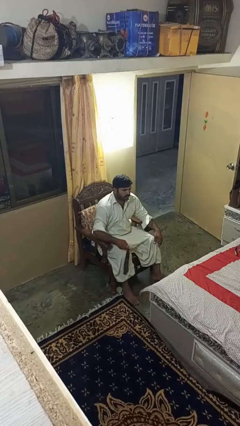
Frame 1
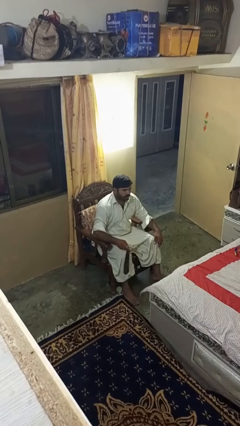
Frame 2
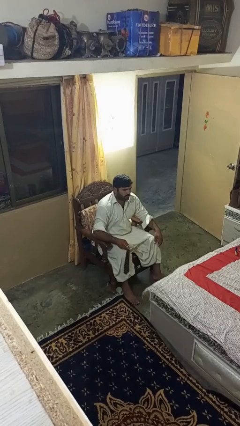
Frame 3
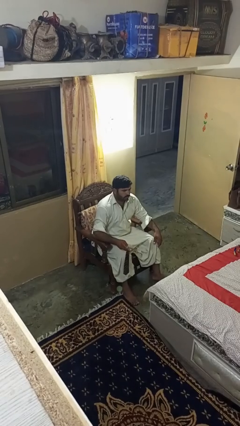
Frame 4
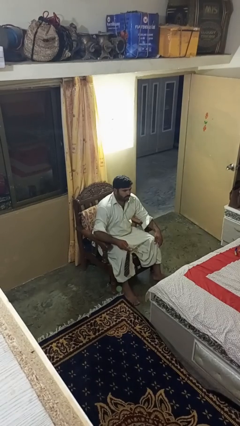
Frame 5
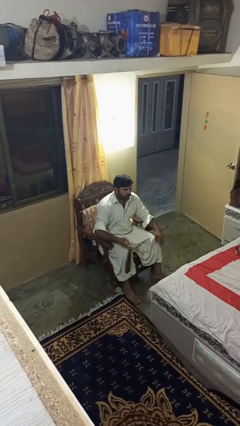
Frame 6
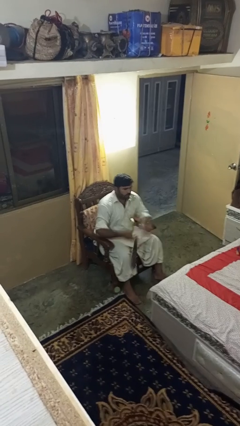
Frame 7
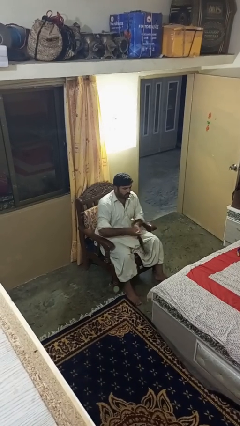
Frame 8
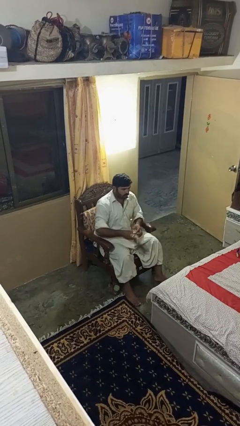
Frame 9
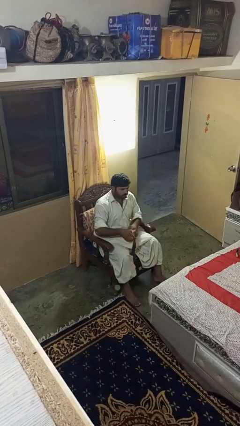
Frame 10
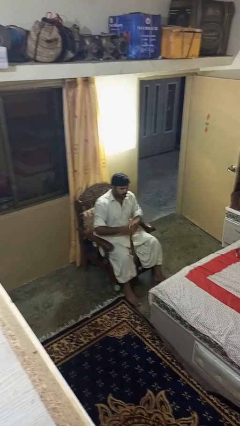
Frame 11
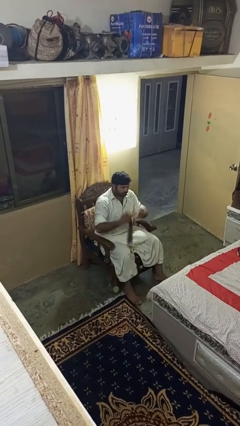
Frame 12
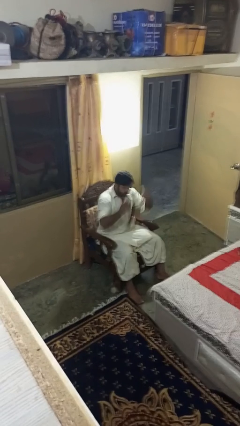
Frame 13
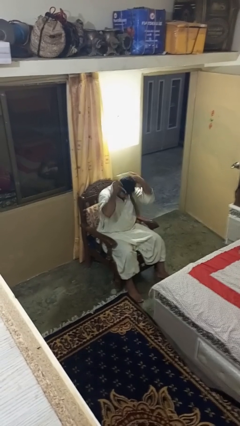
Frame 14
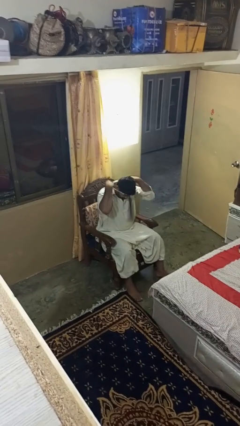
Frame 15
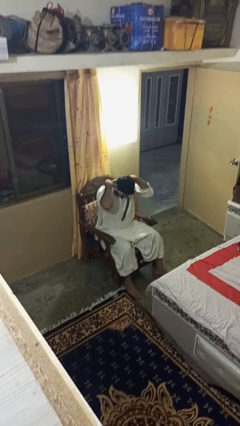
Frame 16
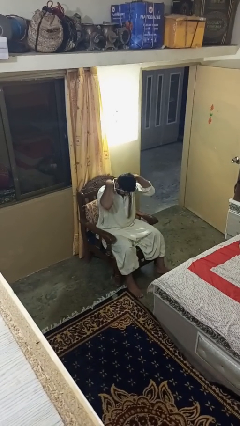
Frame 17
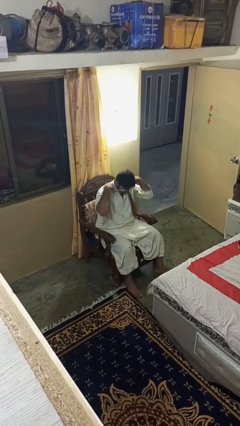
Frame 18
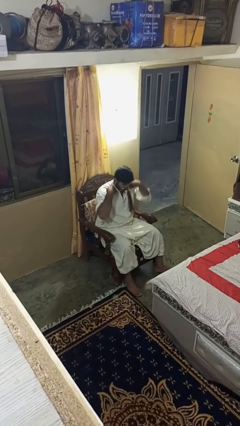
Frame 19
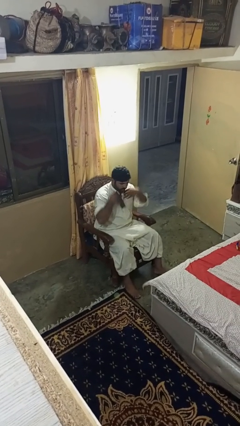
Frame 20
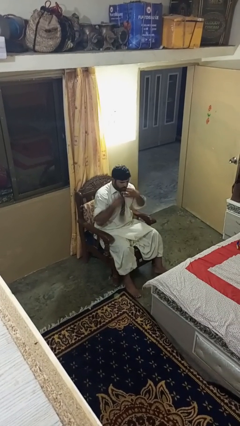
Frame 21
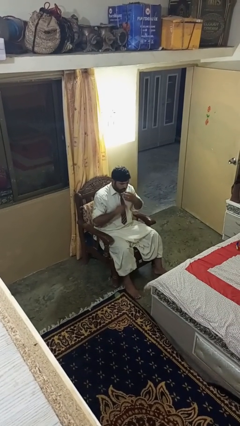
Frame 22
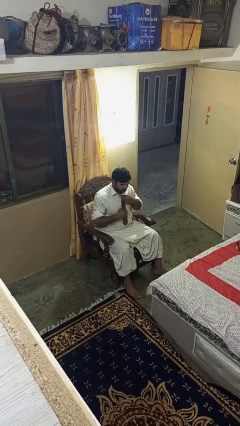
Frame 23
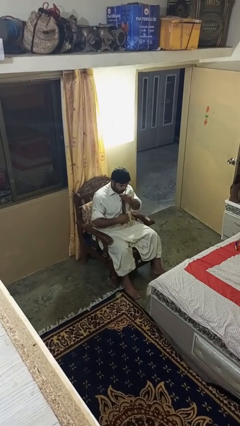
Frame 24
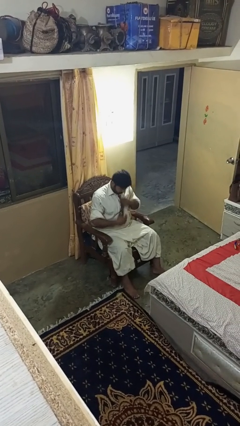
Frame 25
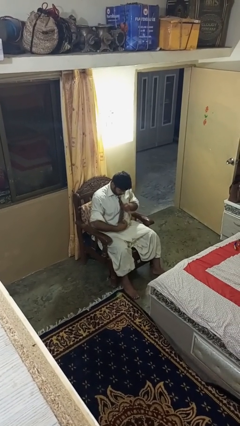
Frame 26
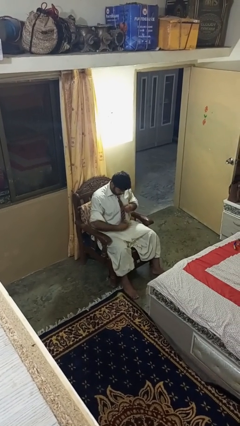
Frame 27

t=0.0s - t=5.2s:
person puts on necktie

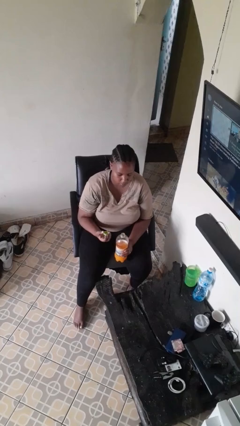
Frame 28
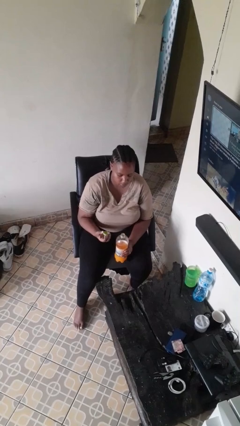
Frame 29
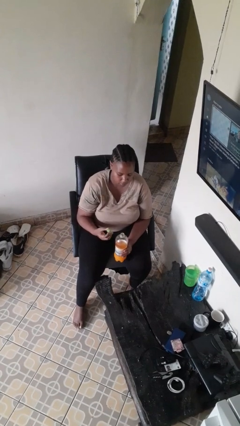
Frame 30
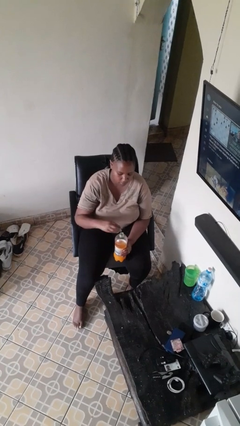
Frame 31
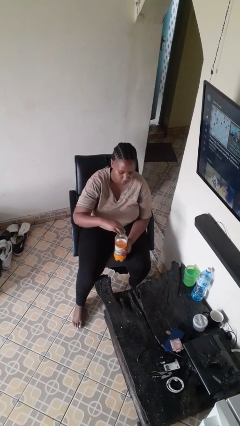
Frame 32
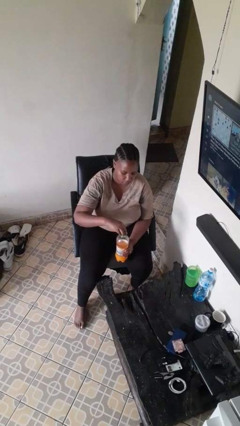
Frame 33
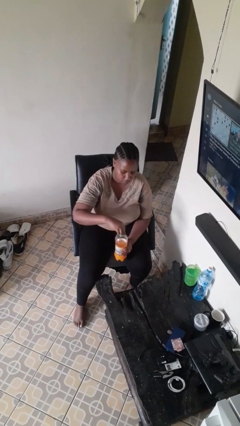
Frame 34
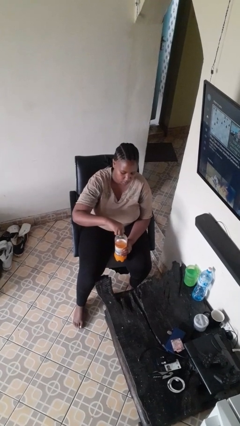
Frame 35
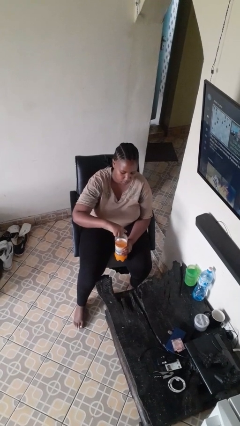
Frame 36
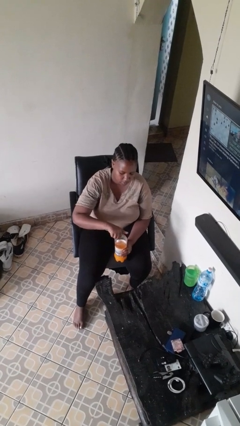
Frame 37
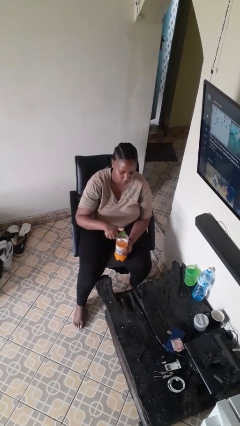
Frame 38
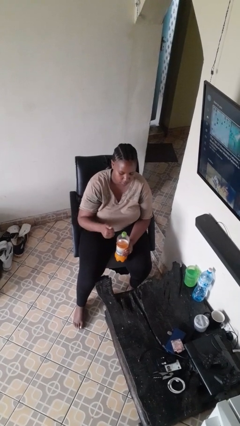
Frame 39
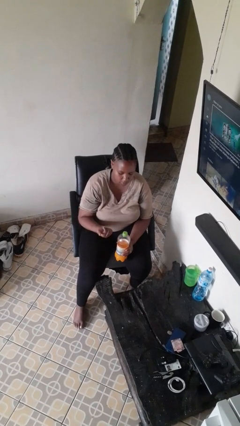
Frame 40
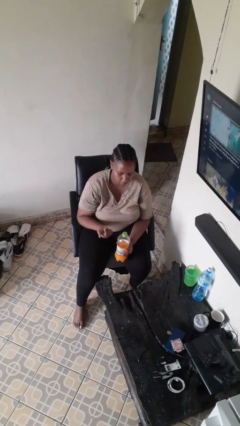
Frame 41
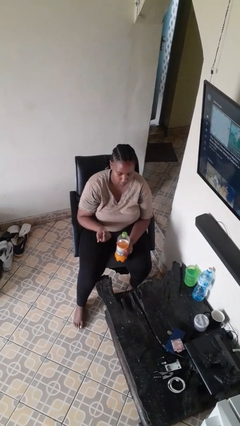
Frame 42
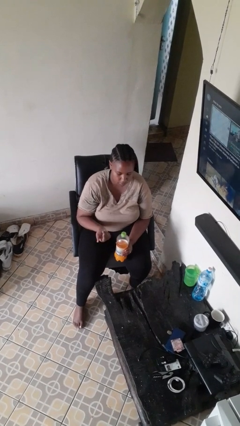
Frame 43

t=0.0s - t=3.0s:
person screws lid to bottle

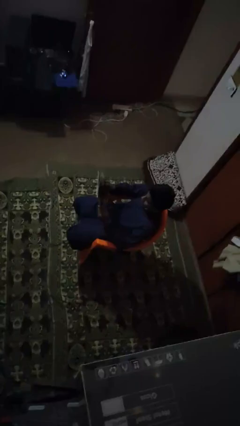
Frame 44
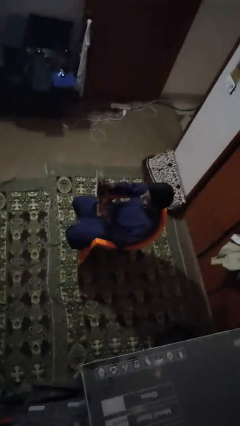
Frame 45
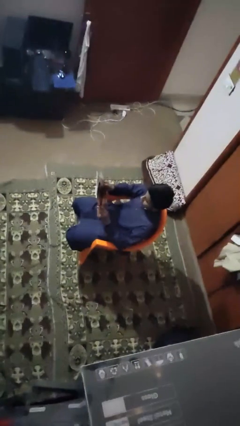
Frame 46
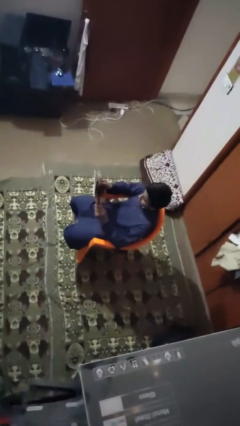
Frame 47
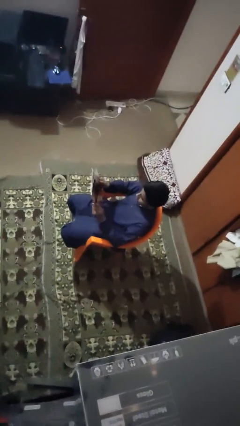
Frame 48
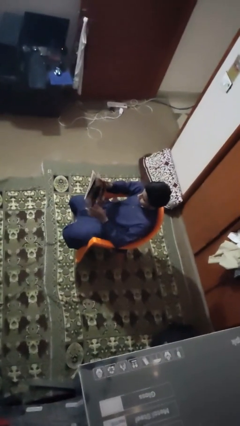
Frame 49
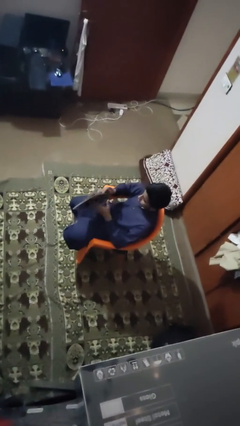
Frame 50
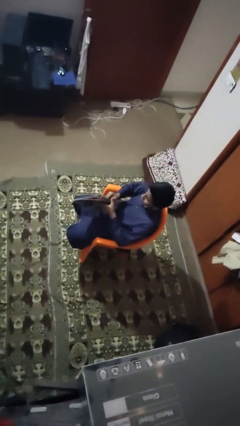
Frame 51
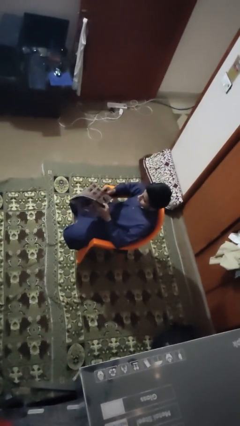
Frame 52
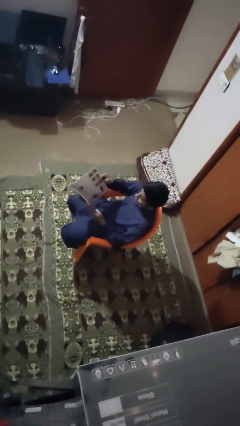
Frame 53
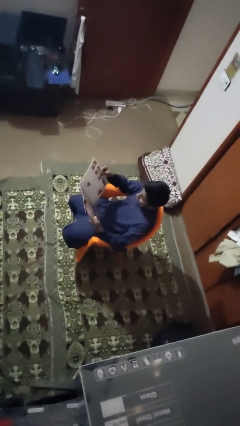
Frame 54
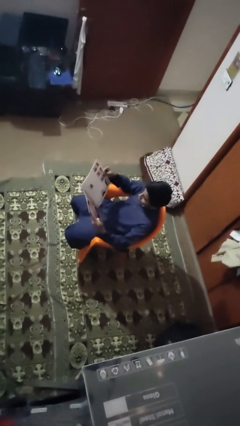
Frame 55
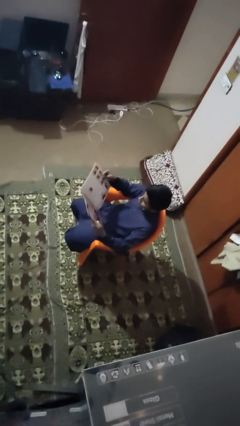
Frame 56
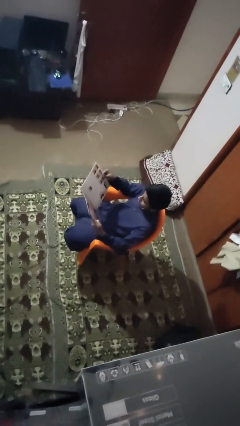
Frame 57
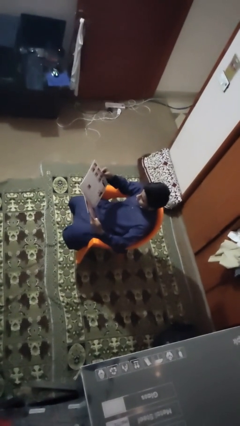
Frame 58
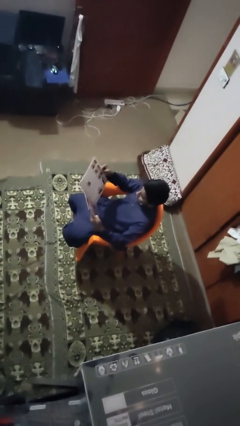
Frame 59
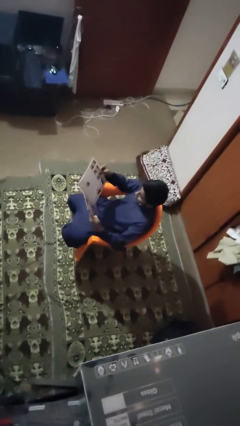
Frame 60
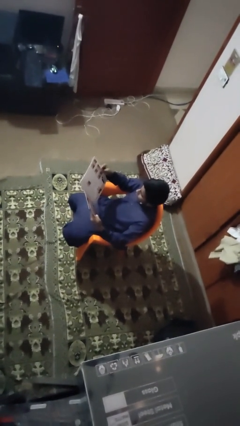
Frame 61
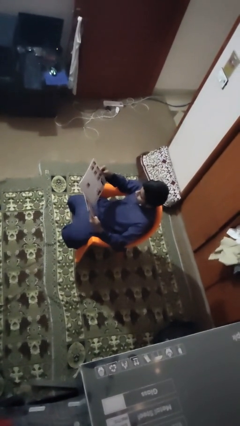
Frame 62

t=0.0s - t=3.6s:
person reads magazine

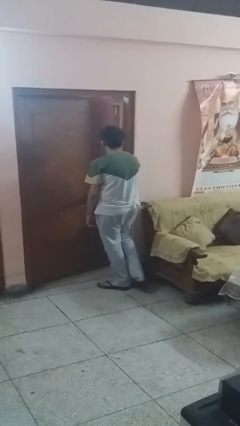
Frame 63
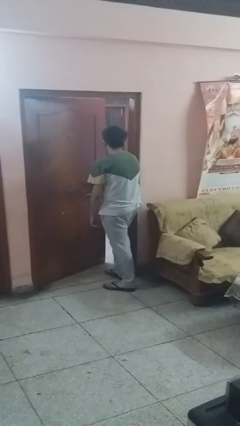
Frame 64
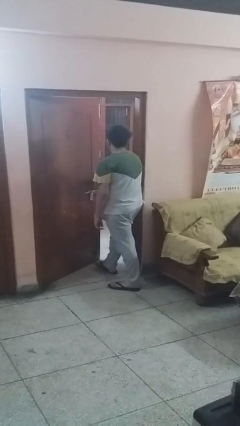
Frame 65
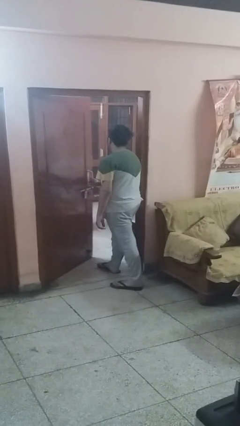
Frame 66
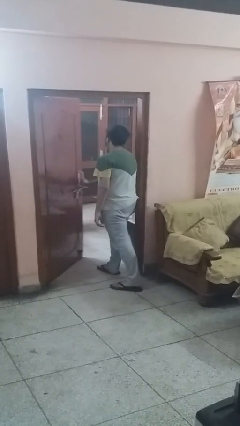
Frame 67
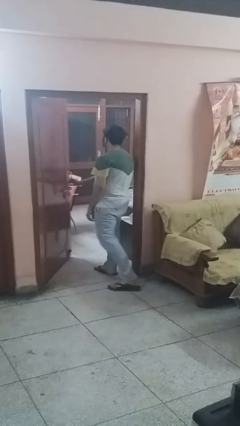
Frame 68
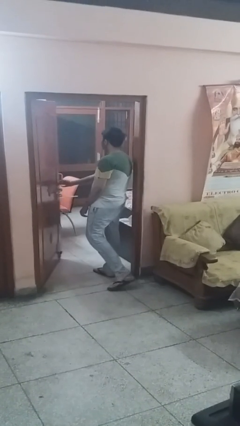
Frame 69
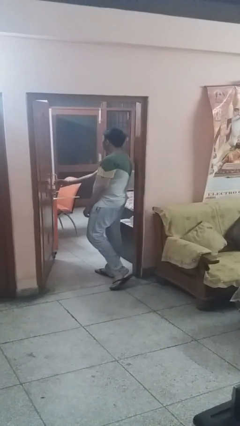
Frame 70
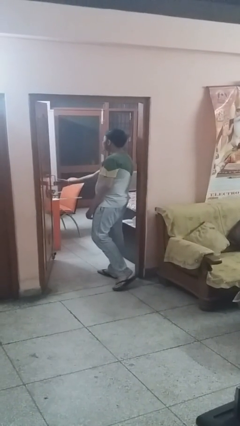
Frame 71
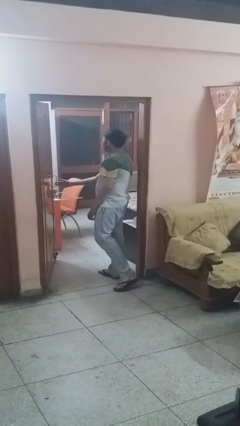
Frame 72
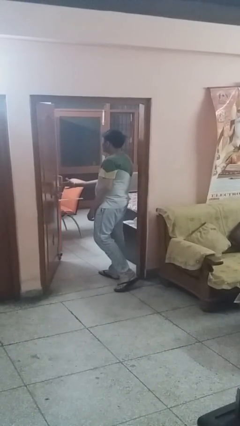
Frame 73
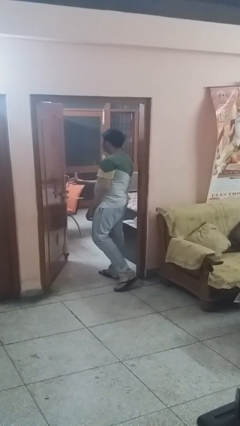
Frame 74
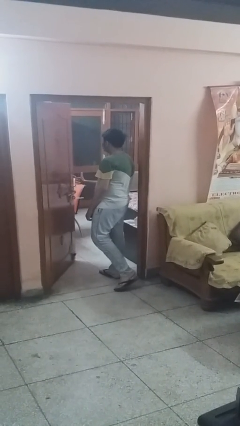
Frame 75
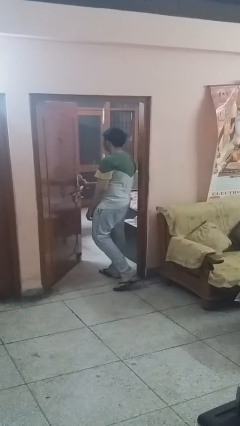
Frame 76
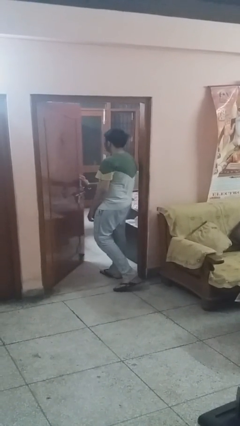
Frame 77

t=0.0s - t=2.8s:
person opens facility door

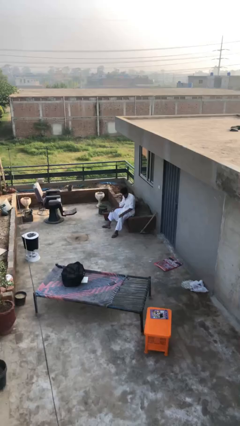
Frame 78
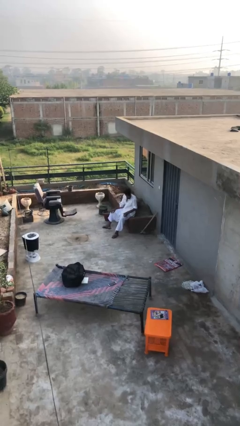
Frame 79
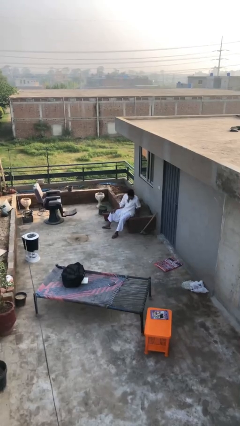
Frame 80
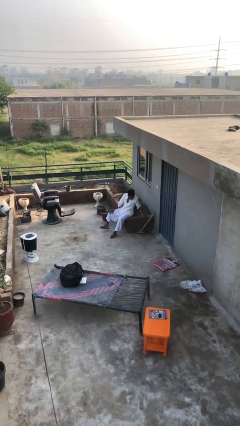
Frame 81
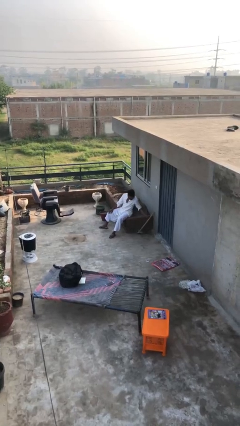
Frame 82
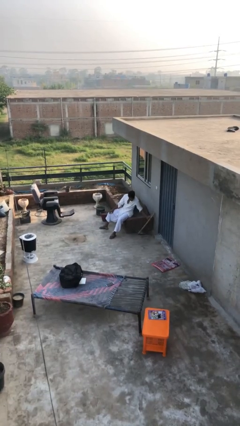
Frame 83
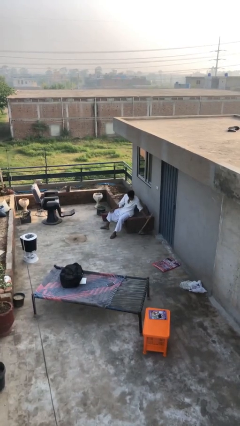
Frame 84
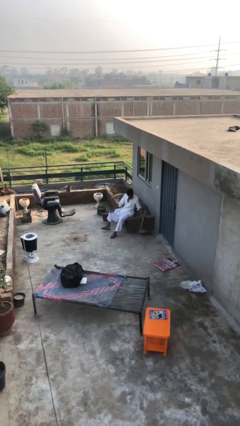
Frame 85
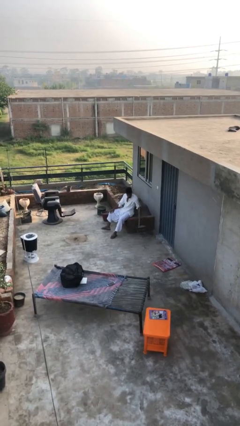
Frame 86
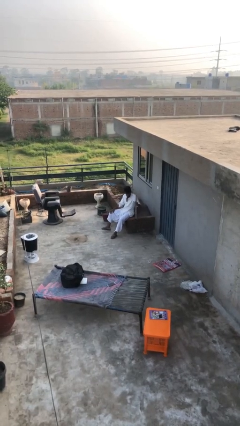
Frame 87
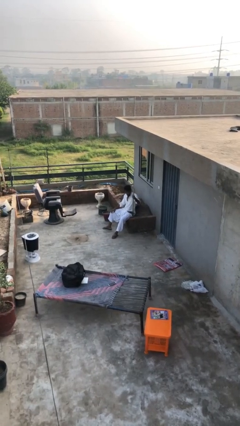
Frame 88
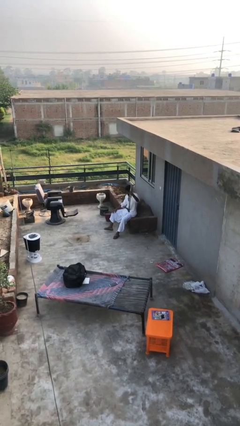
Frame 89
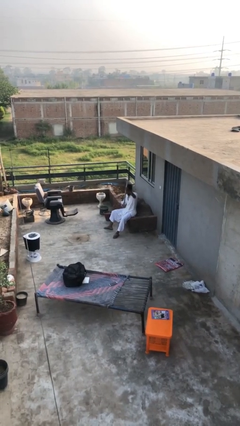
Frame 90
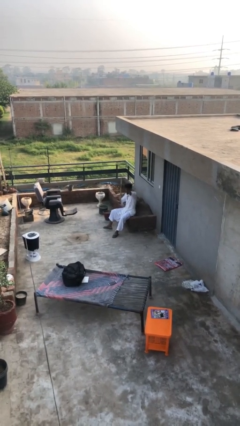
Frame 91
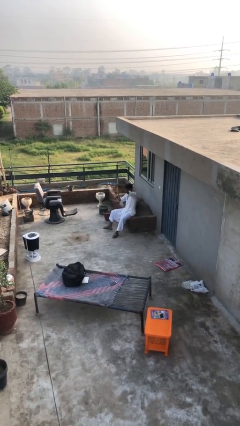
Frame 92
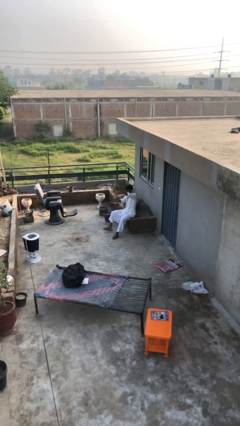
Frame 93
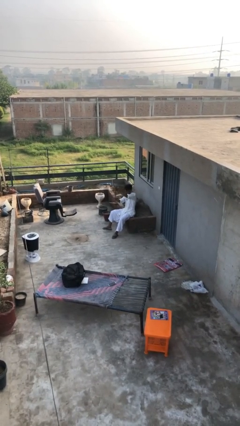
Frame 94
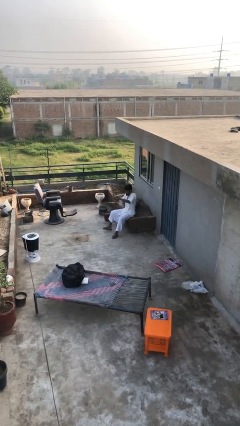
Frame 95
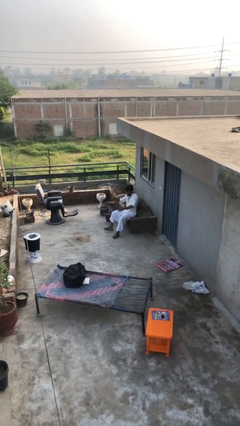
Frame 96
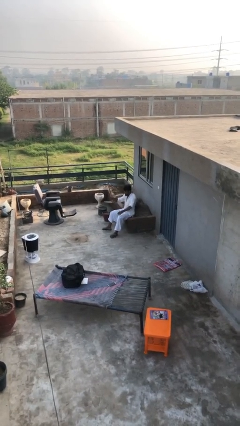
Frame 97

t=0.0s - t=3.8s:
person picks up object from floor
